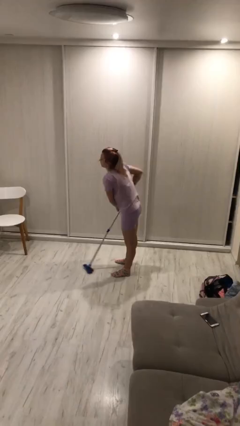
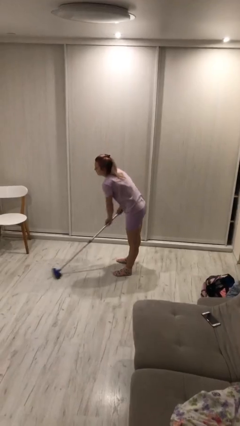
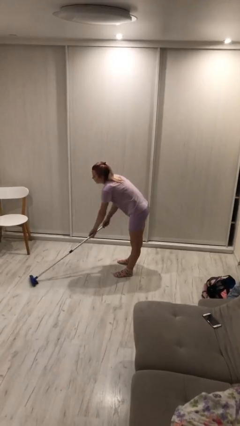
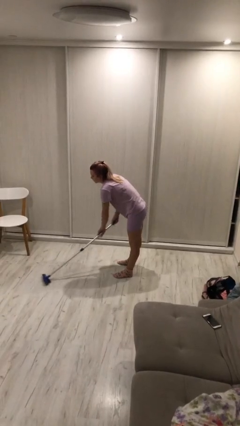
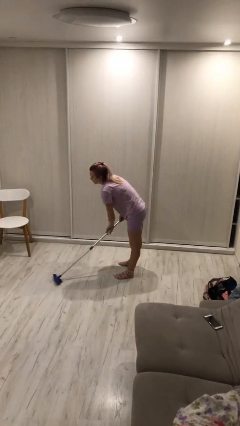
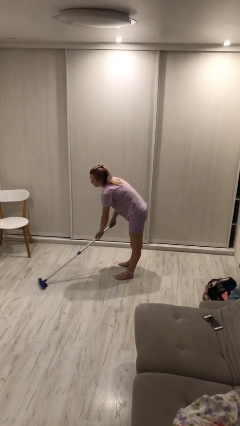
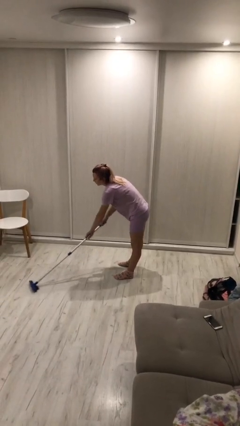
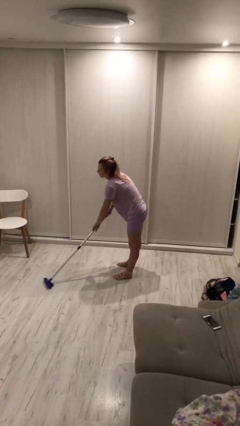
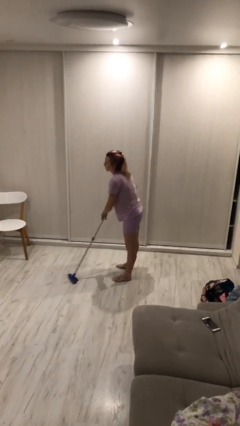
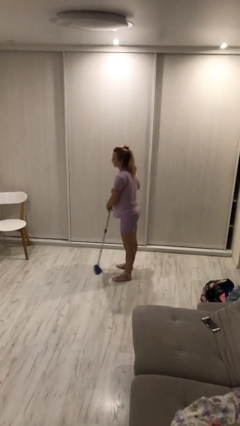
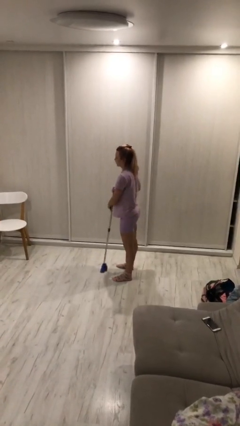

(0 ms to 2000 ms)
person mops

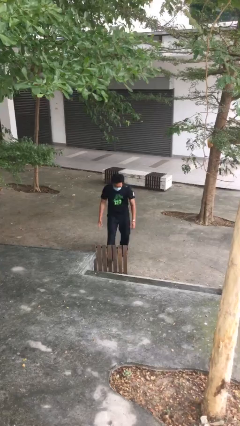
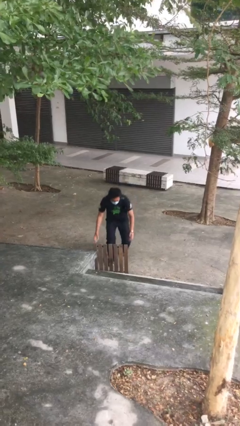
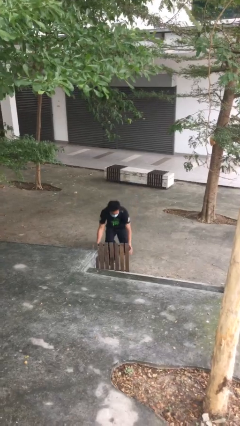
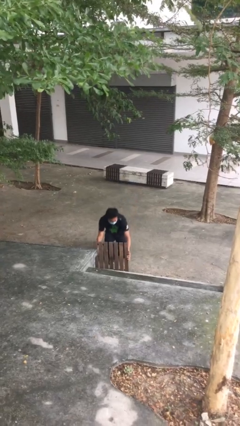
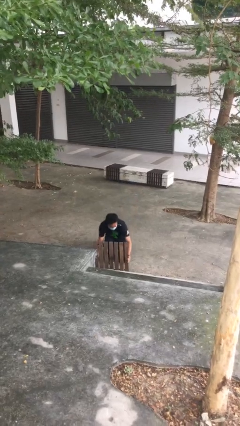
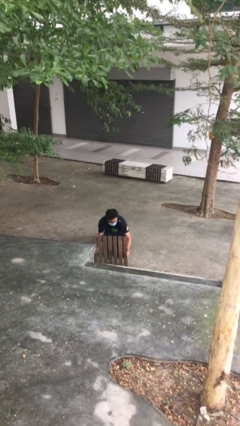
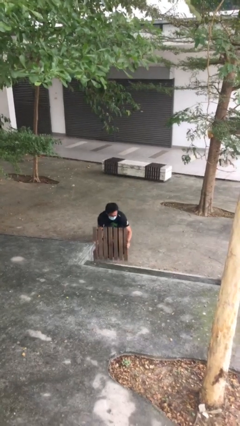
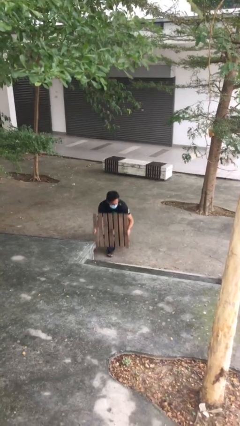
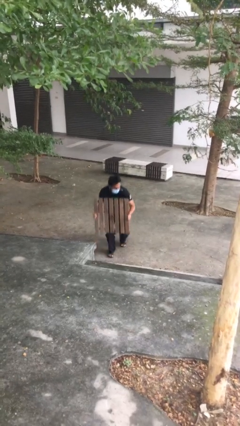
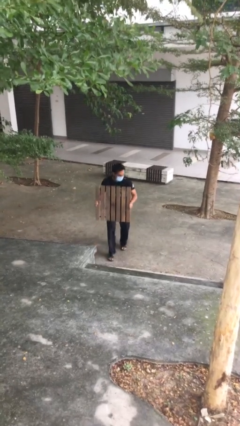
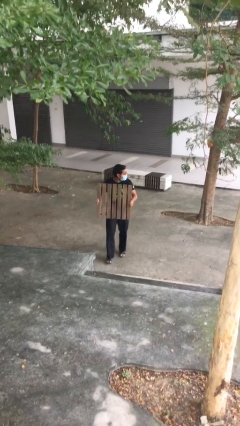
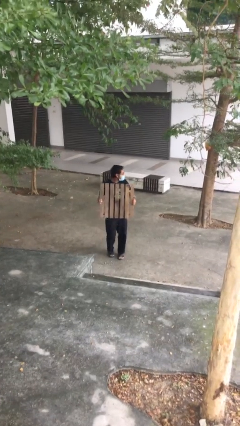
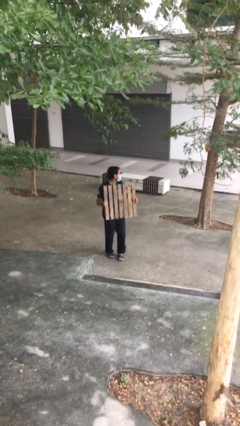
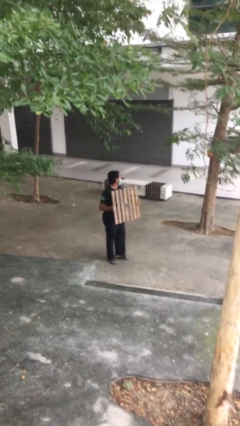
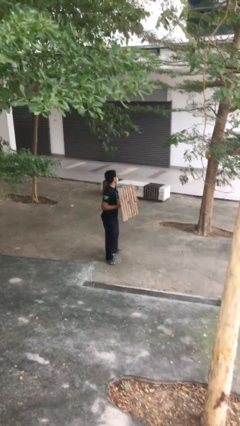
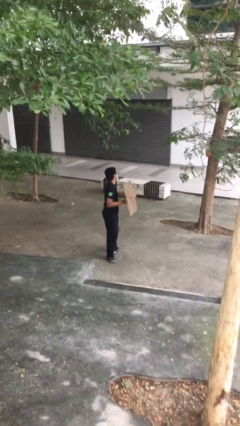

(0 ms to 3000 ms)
person picks up object from floor

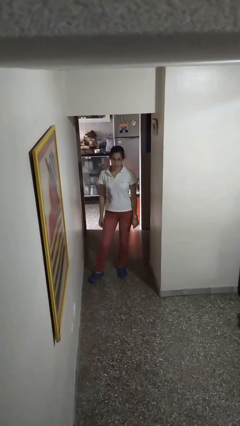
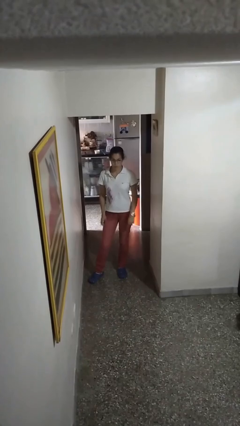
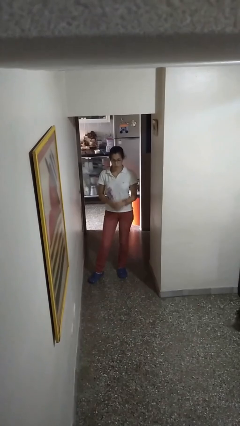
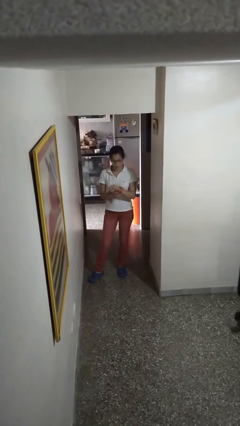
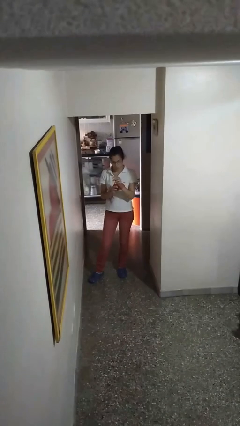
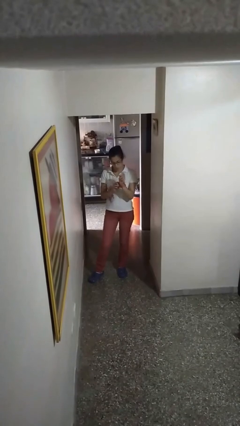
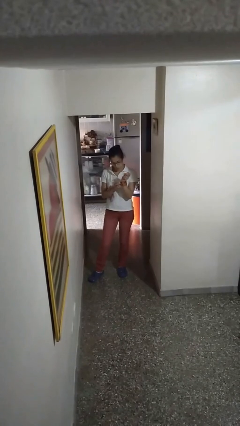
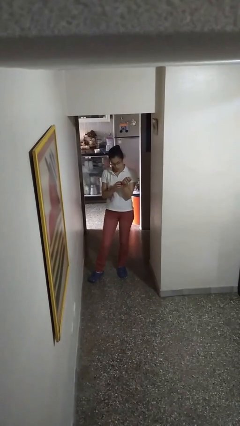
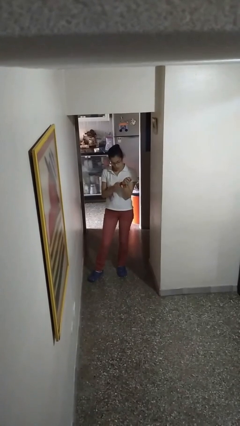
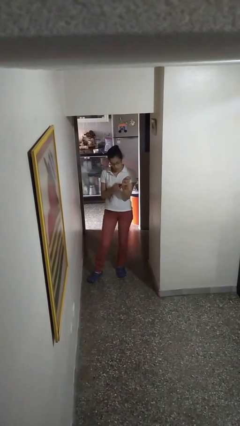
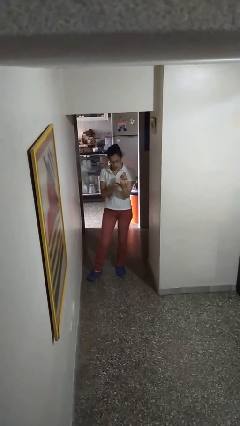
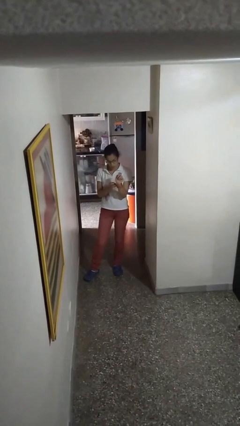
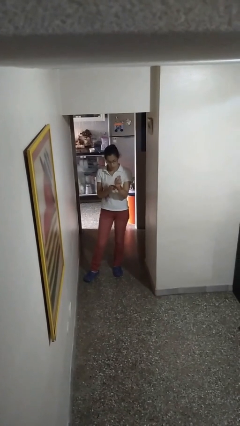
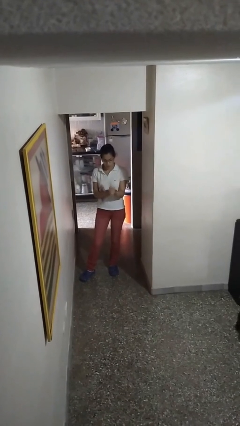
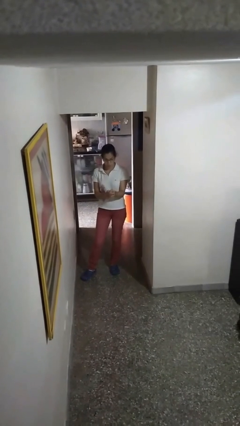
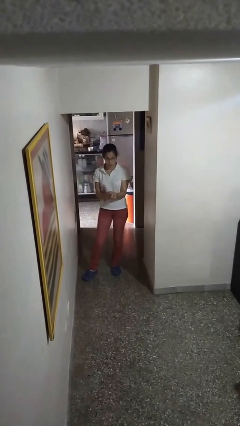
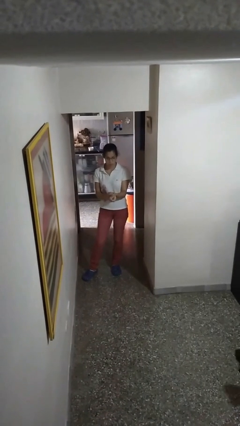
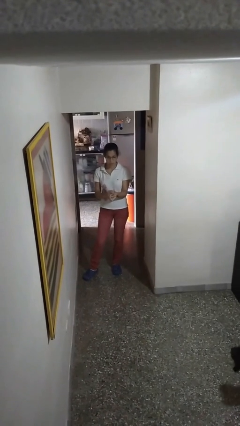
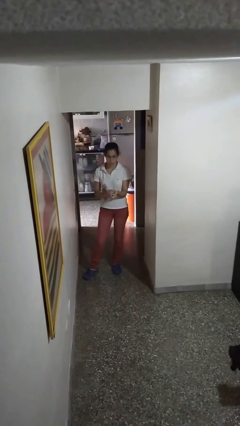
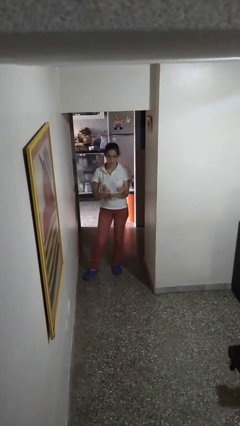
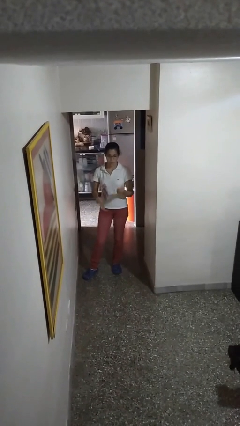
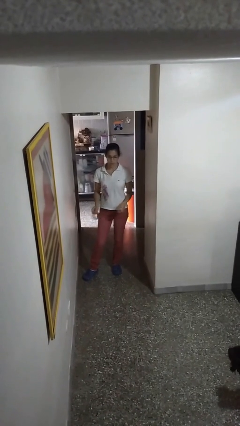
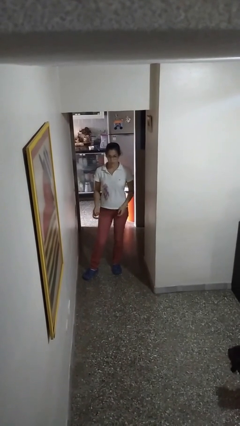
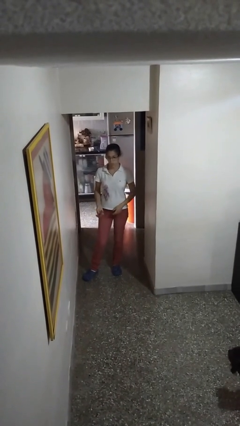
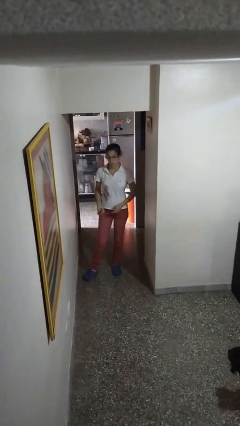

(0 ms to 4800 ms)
person takes off wristwatch

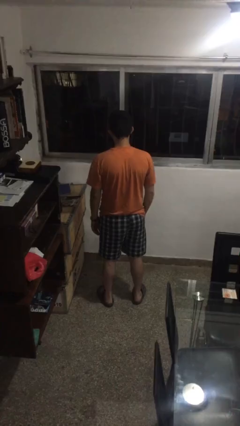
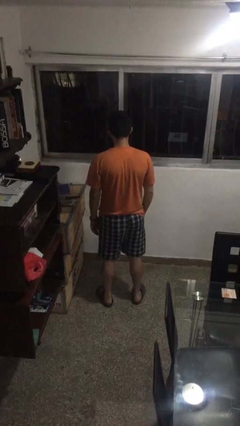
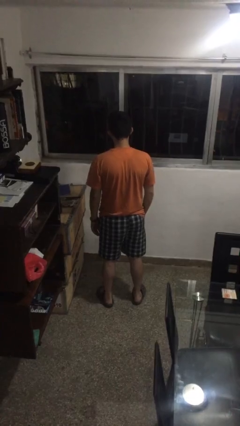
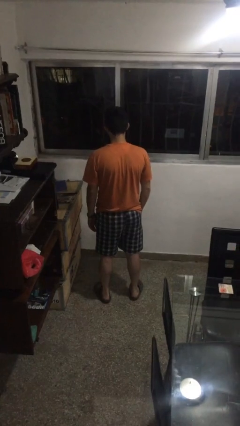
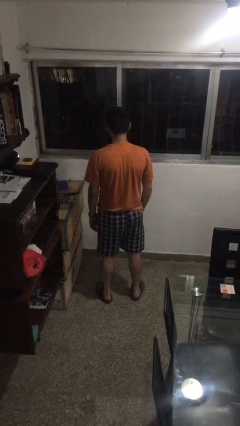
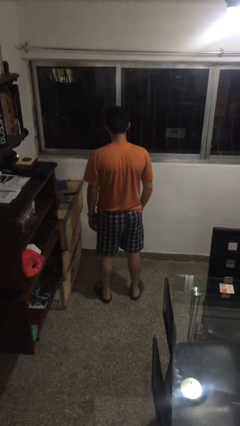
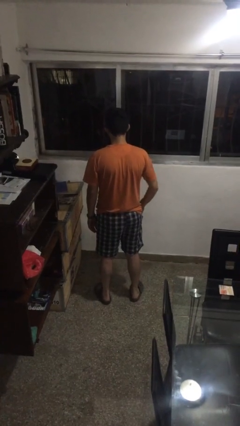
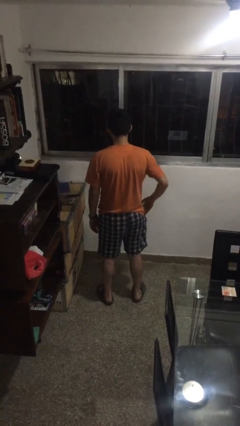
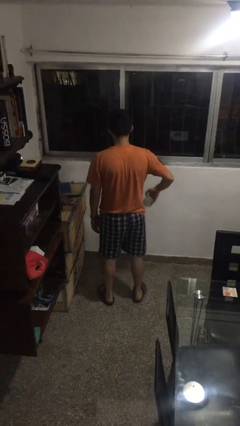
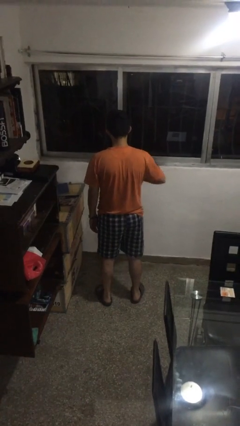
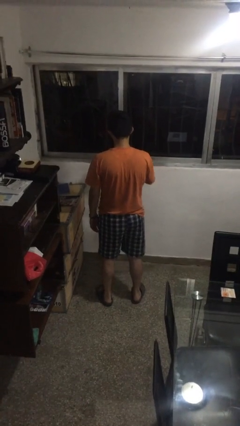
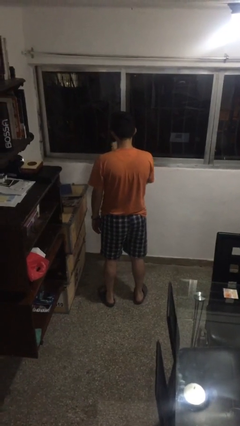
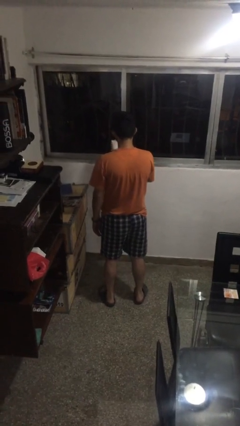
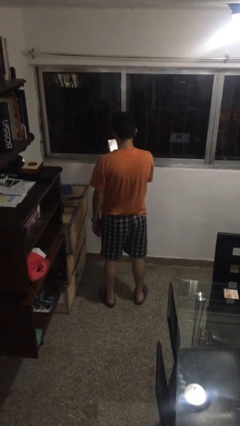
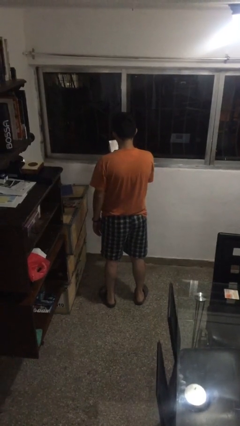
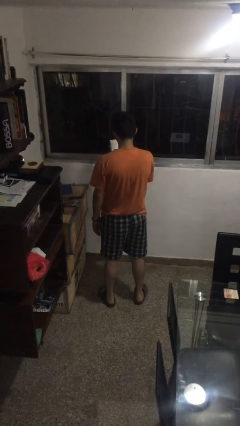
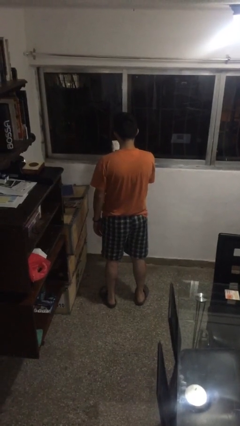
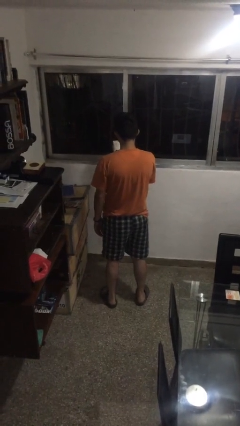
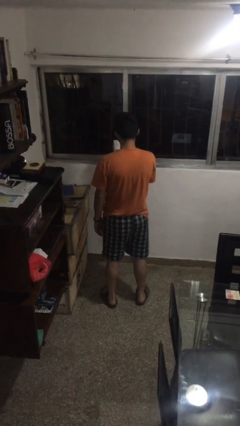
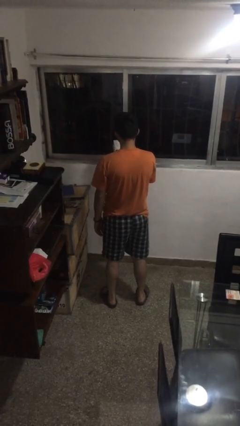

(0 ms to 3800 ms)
person takes phone from pocket

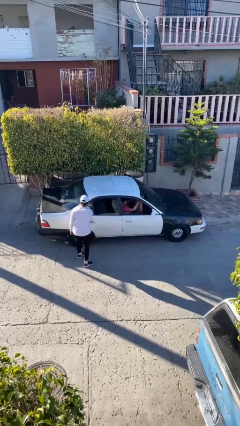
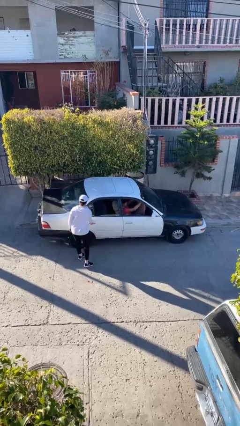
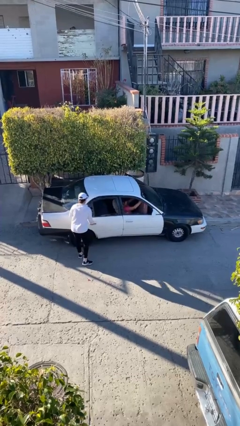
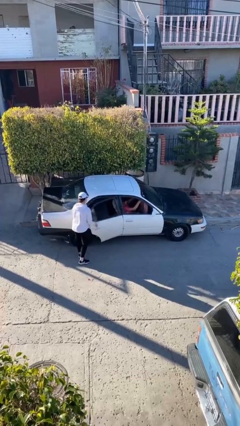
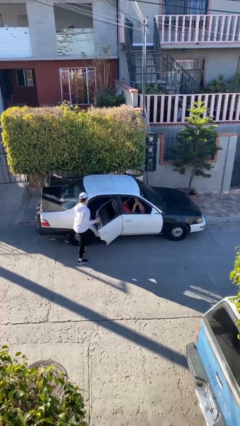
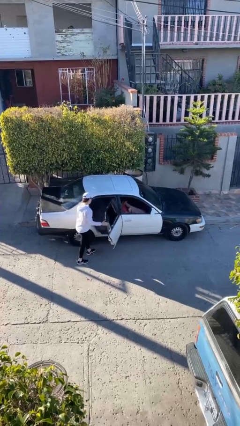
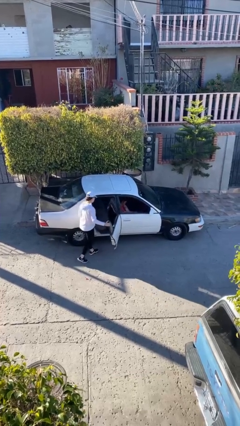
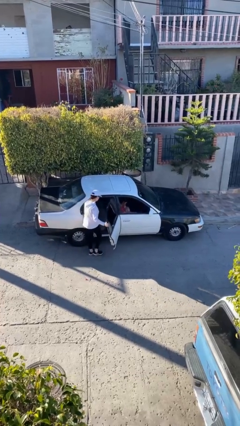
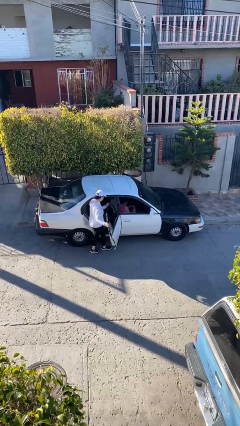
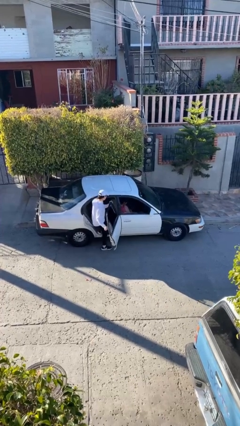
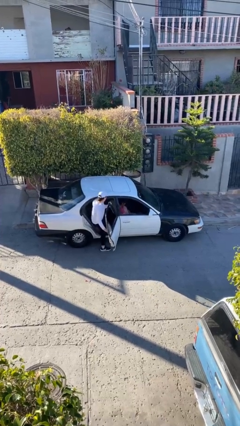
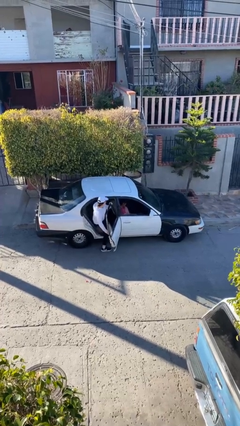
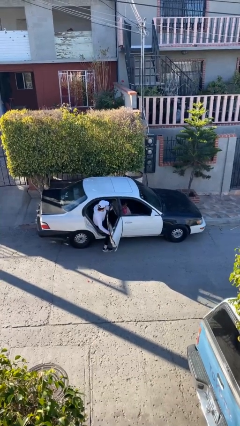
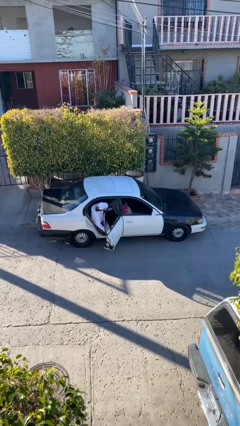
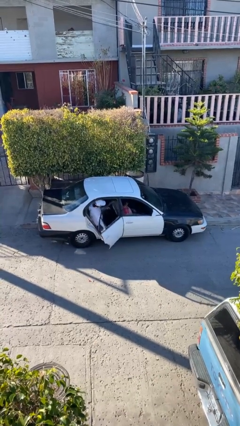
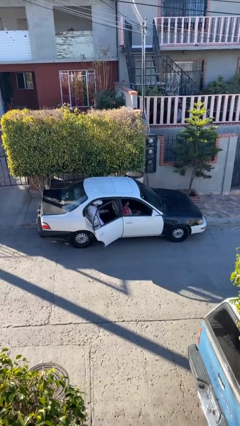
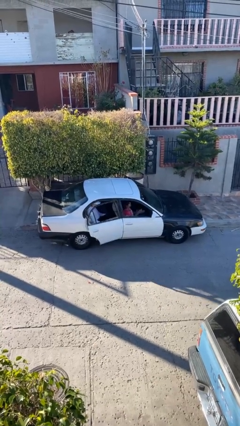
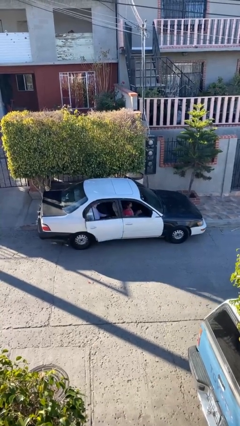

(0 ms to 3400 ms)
car picks up person

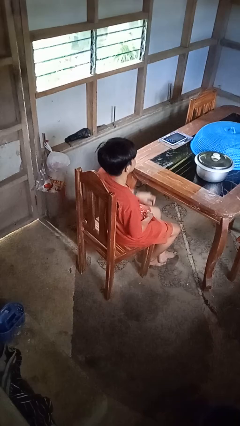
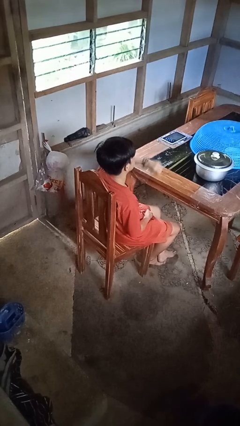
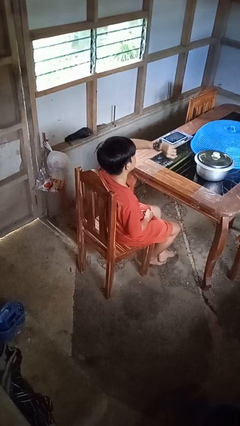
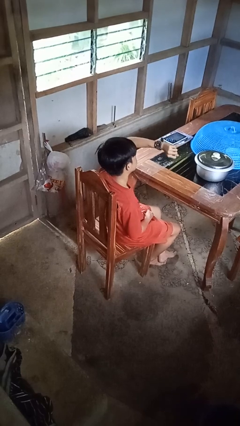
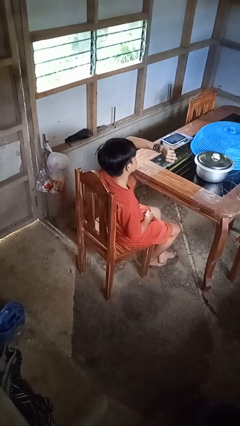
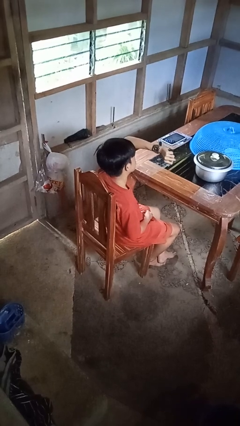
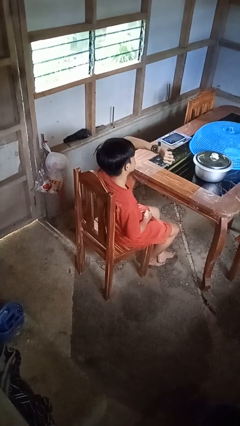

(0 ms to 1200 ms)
person looks at wristwatch
